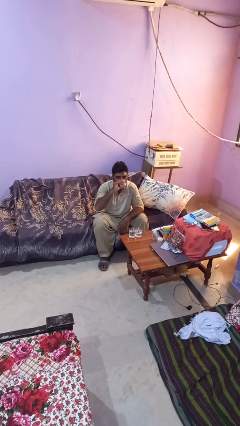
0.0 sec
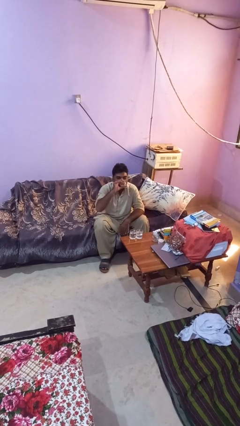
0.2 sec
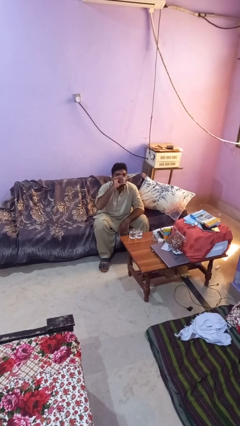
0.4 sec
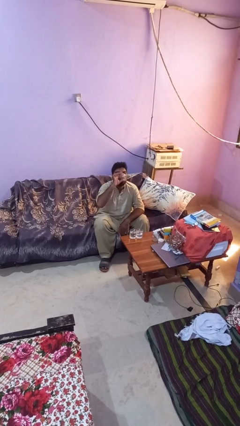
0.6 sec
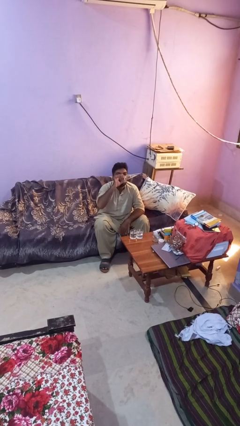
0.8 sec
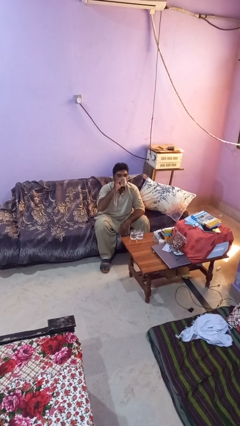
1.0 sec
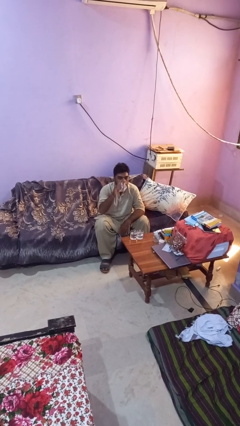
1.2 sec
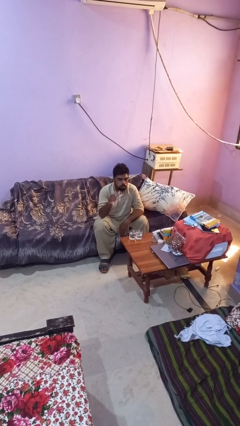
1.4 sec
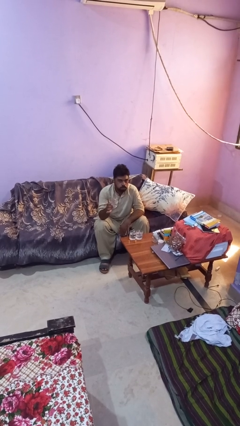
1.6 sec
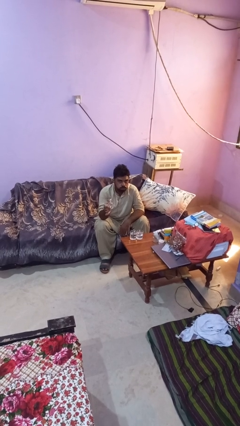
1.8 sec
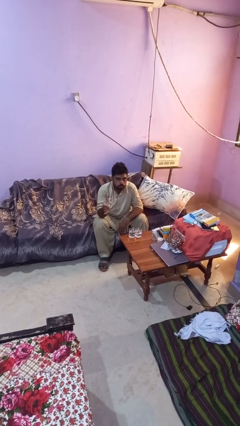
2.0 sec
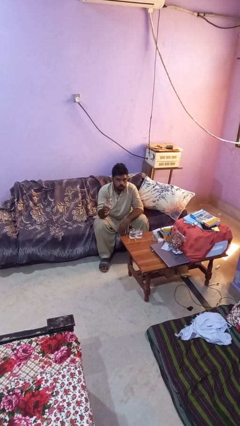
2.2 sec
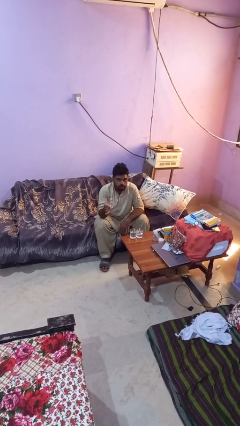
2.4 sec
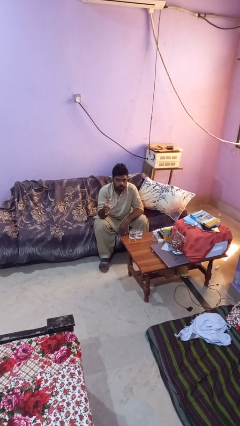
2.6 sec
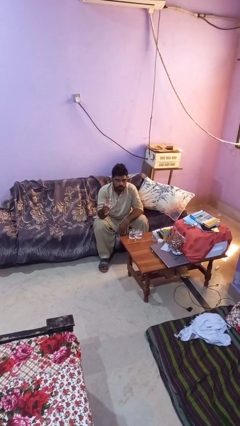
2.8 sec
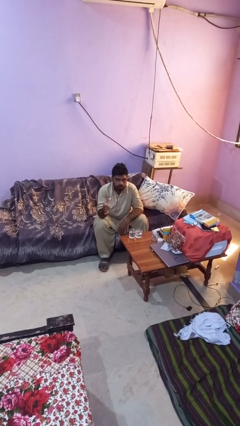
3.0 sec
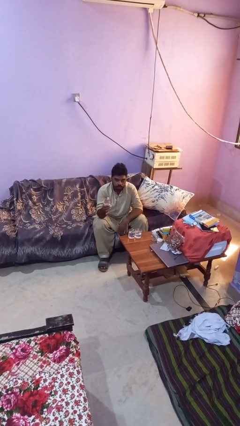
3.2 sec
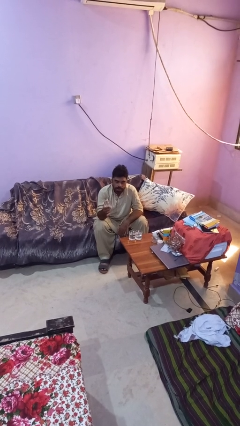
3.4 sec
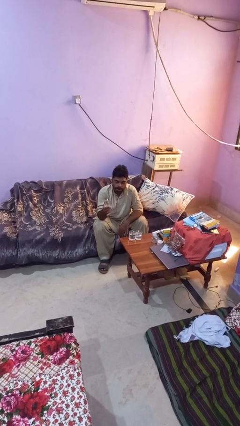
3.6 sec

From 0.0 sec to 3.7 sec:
person puts down object on table

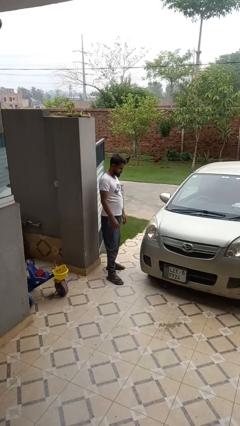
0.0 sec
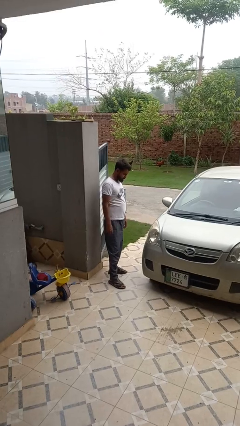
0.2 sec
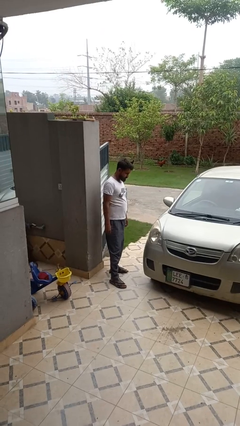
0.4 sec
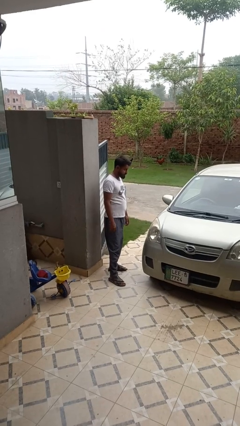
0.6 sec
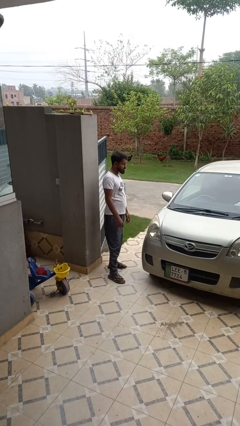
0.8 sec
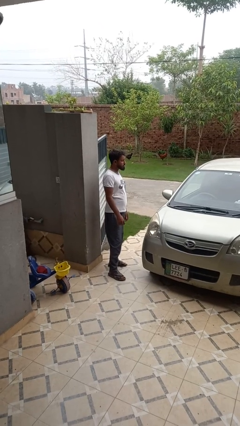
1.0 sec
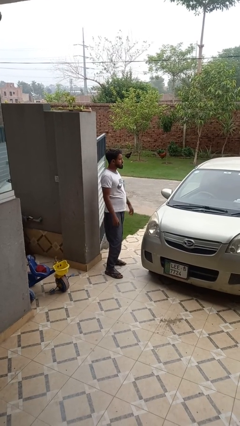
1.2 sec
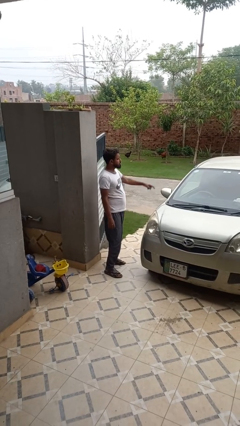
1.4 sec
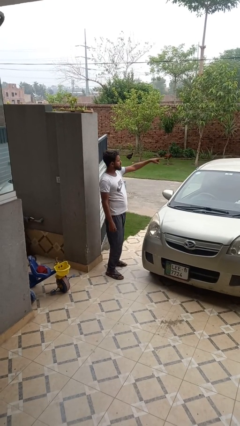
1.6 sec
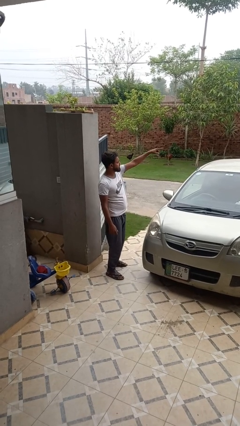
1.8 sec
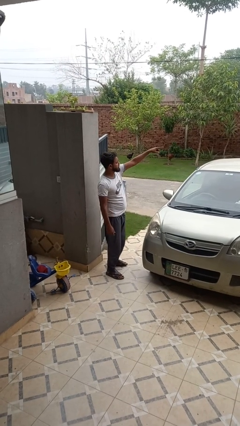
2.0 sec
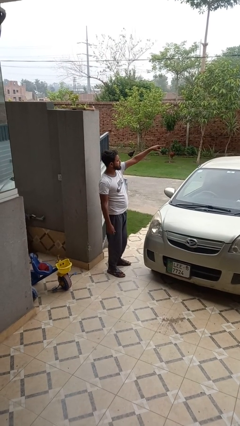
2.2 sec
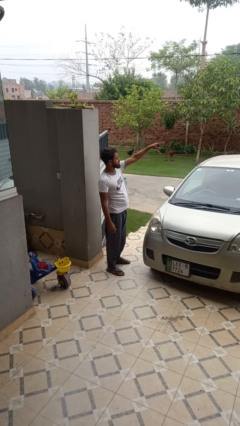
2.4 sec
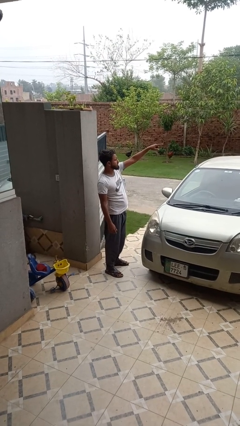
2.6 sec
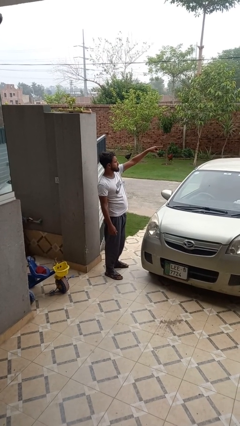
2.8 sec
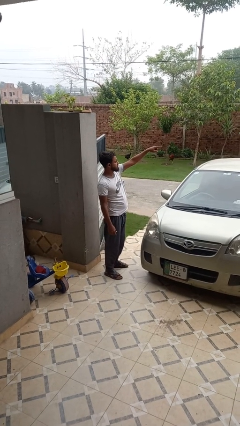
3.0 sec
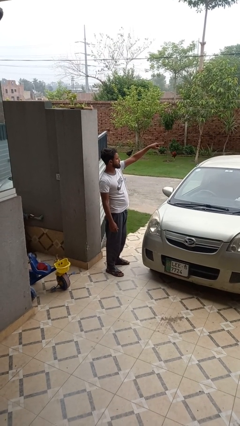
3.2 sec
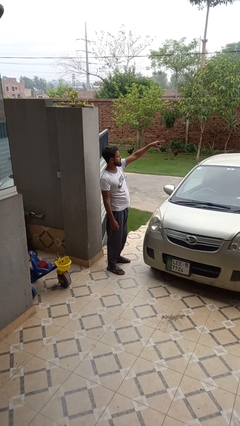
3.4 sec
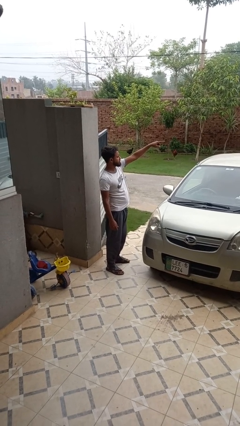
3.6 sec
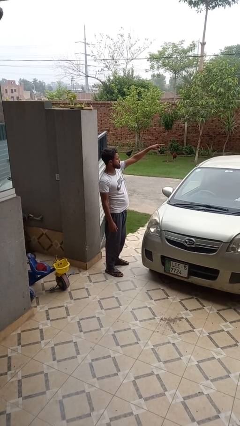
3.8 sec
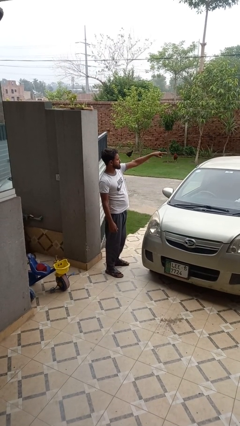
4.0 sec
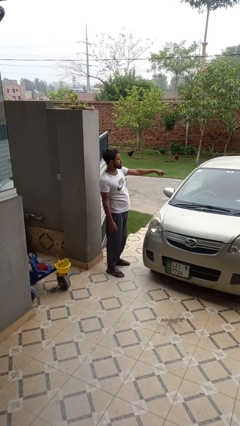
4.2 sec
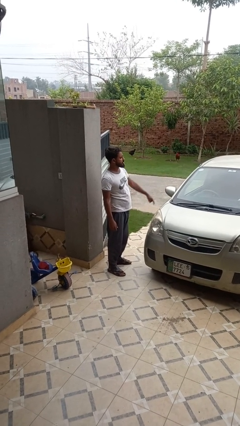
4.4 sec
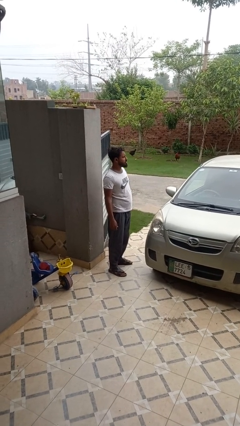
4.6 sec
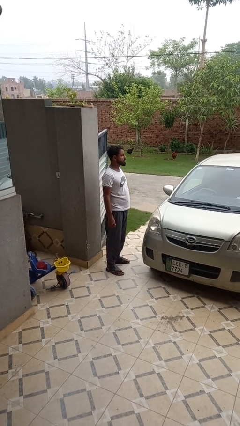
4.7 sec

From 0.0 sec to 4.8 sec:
person points at person

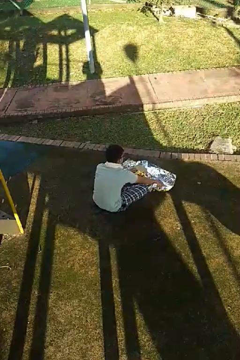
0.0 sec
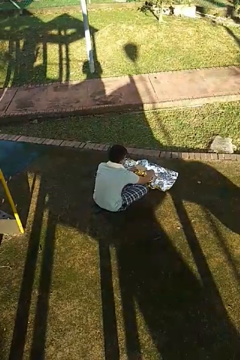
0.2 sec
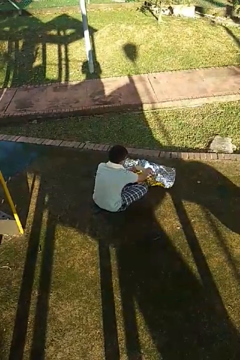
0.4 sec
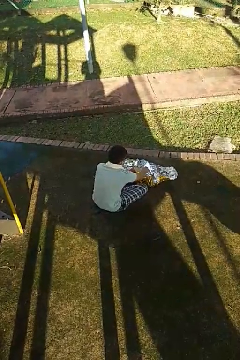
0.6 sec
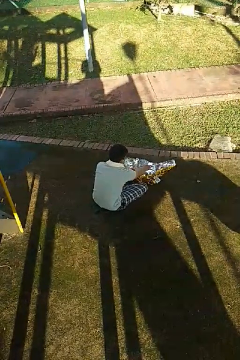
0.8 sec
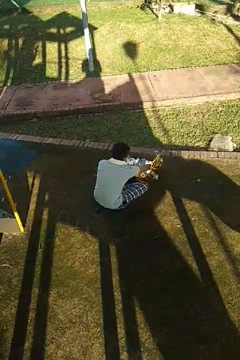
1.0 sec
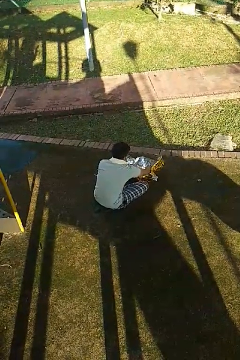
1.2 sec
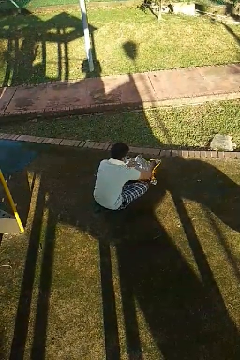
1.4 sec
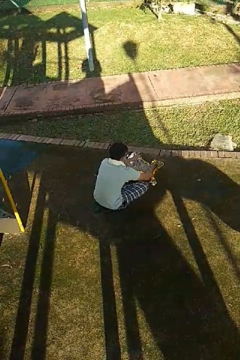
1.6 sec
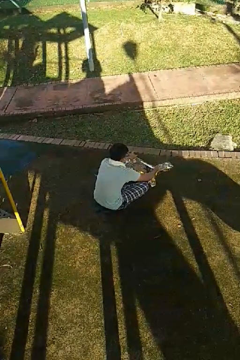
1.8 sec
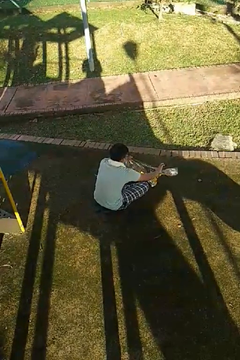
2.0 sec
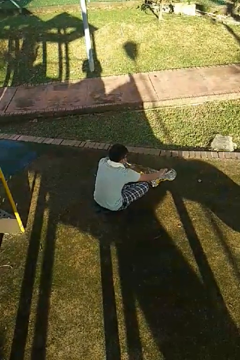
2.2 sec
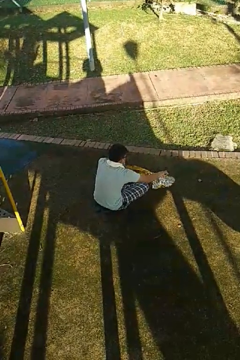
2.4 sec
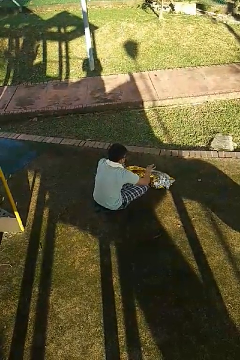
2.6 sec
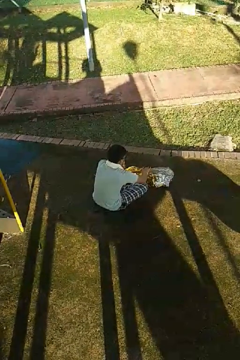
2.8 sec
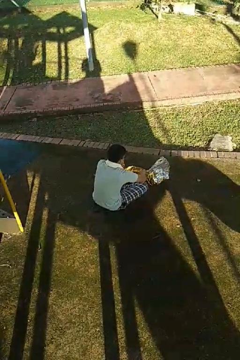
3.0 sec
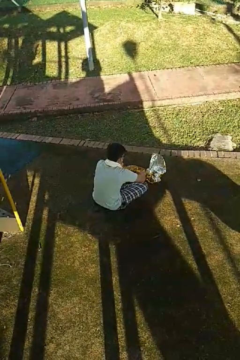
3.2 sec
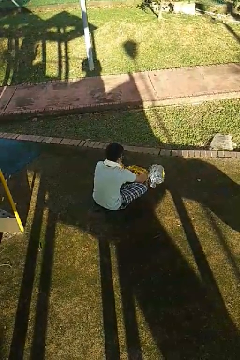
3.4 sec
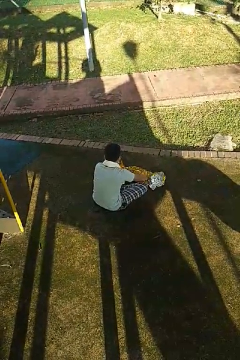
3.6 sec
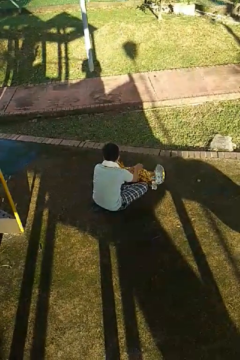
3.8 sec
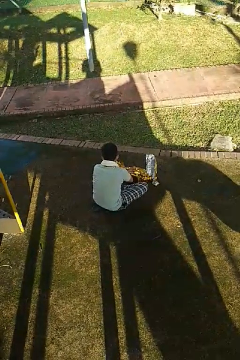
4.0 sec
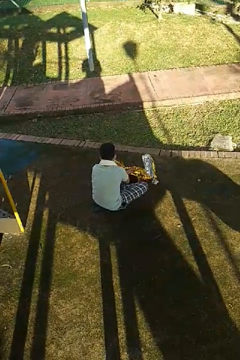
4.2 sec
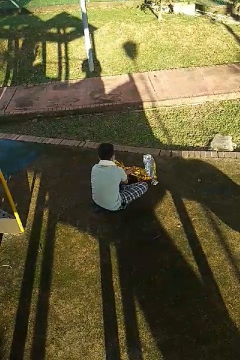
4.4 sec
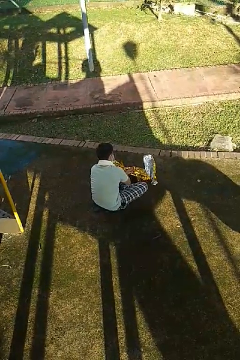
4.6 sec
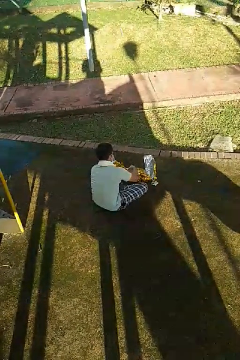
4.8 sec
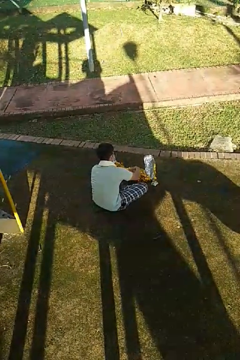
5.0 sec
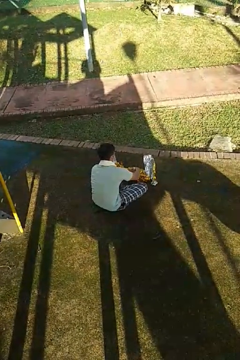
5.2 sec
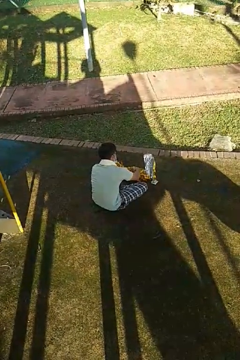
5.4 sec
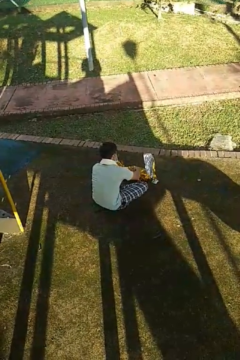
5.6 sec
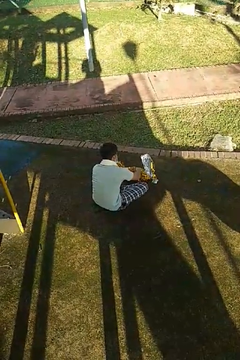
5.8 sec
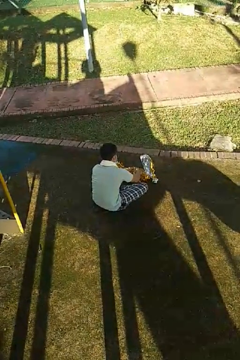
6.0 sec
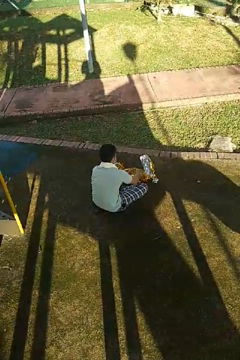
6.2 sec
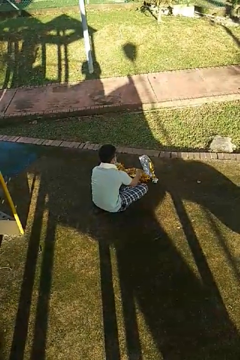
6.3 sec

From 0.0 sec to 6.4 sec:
person wraps box

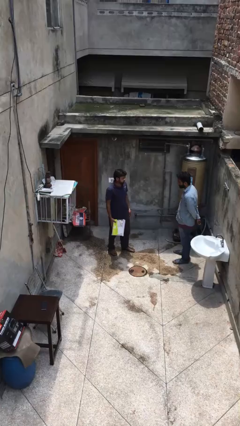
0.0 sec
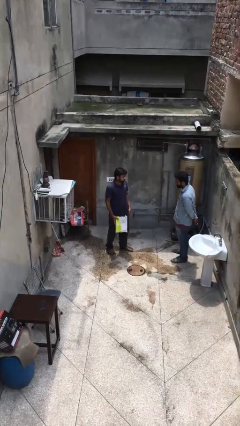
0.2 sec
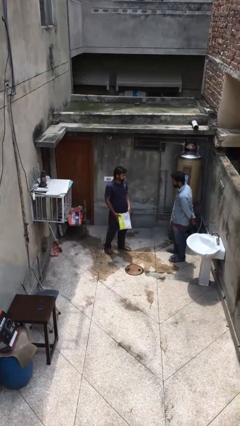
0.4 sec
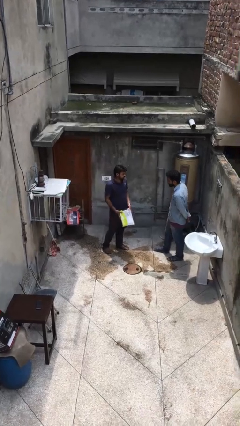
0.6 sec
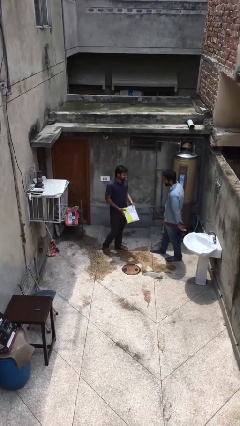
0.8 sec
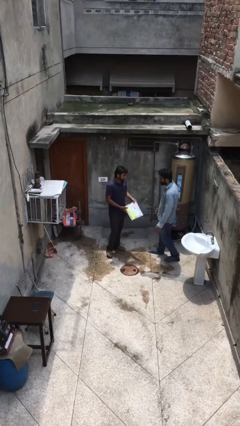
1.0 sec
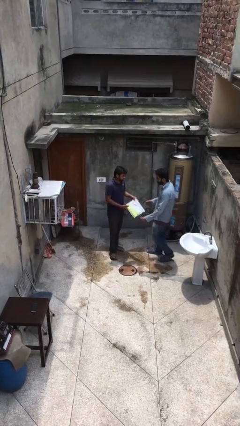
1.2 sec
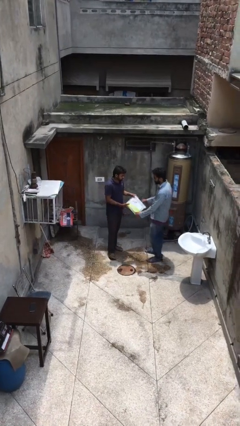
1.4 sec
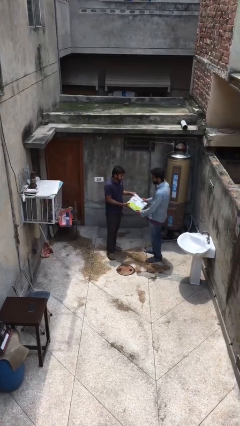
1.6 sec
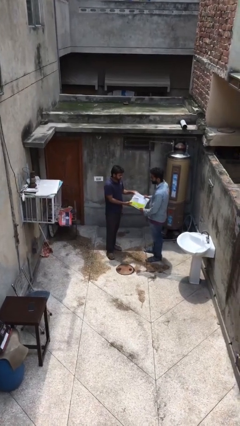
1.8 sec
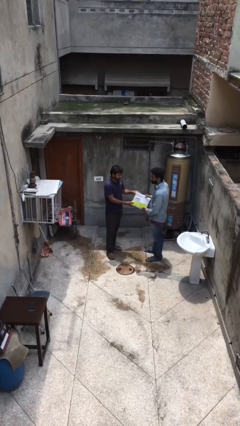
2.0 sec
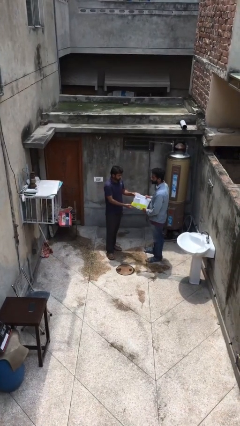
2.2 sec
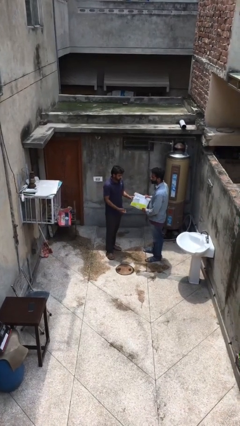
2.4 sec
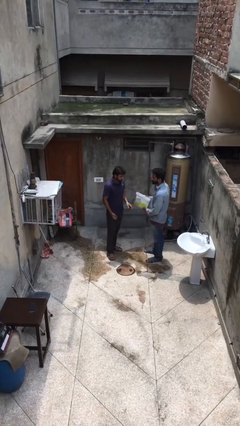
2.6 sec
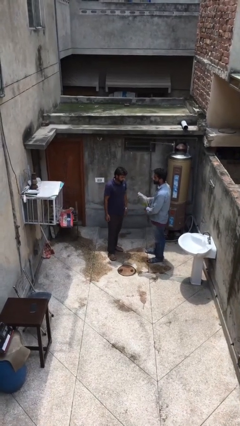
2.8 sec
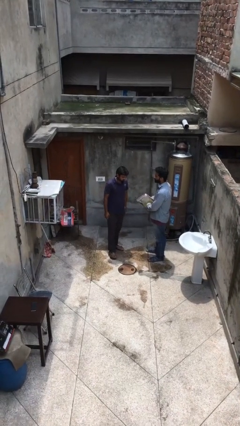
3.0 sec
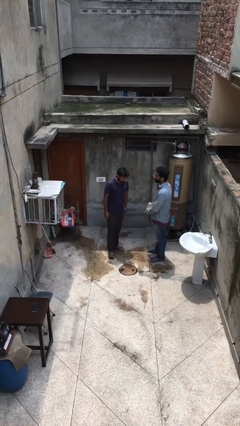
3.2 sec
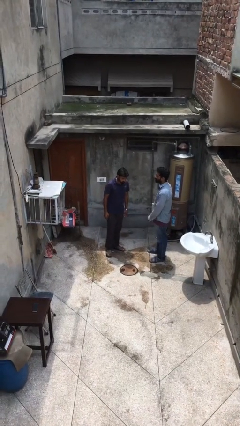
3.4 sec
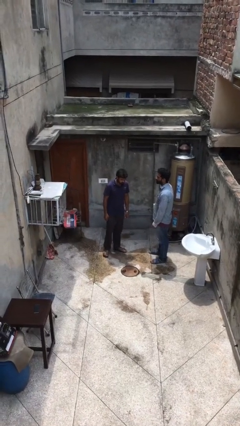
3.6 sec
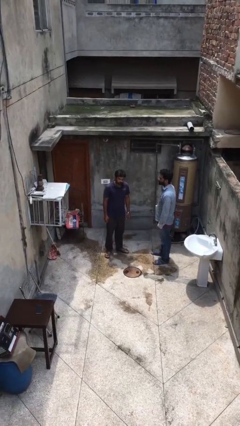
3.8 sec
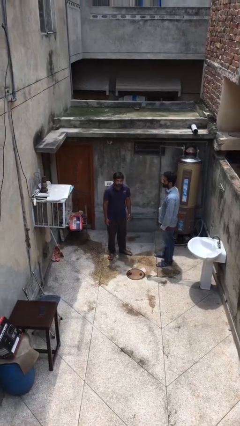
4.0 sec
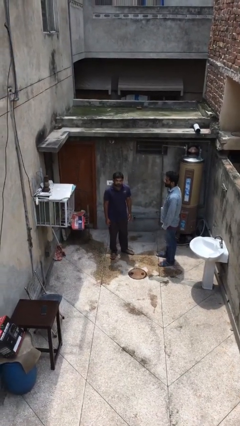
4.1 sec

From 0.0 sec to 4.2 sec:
person transfers object to person

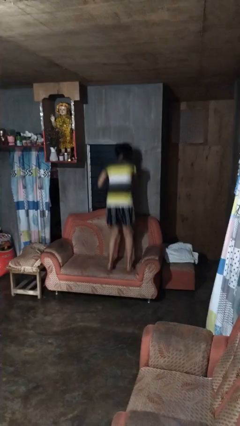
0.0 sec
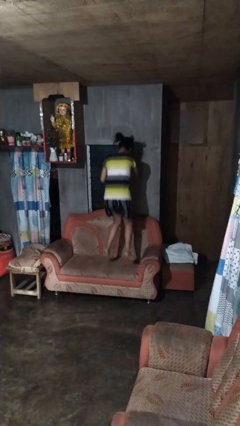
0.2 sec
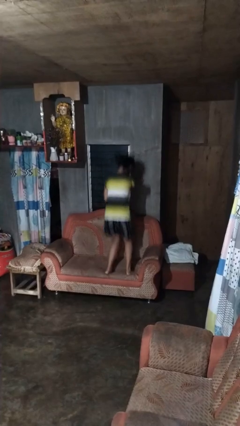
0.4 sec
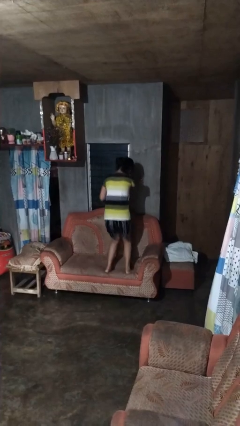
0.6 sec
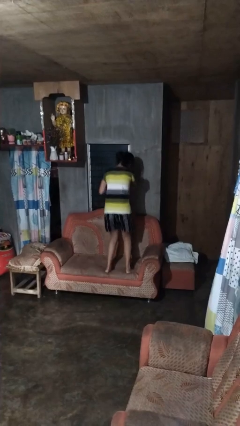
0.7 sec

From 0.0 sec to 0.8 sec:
person jumps on couch
